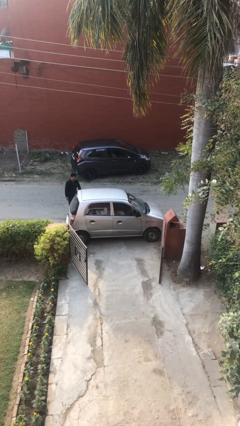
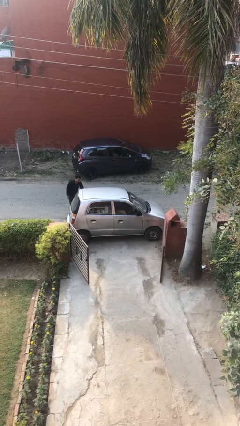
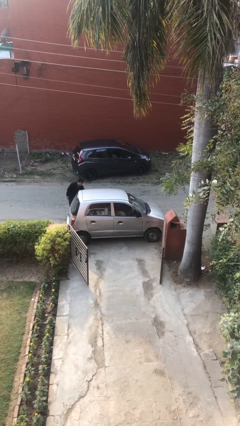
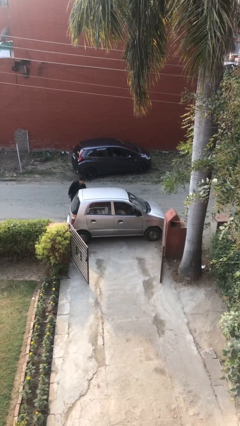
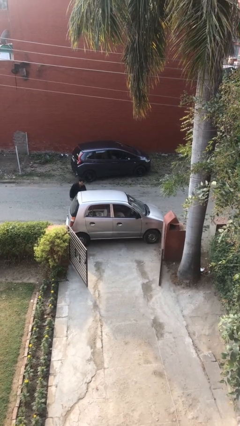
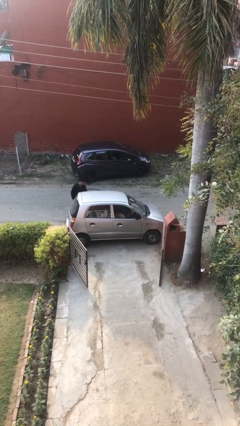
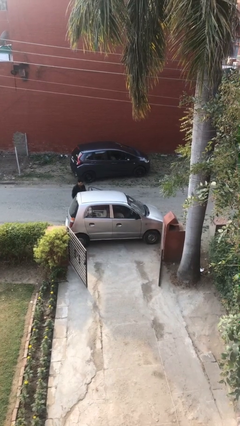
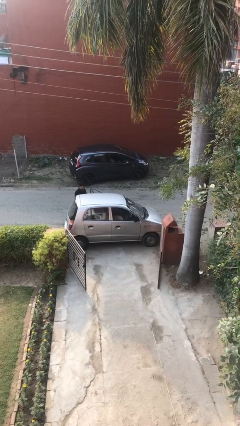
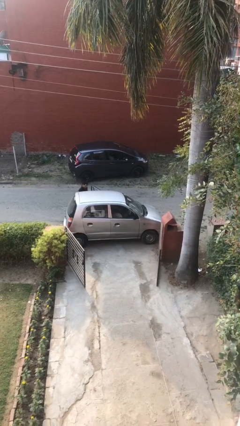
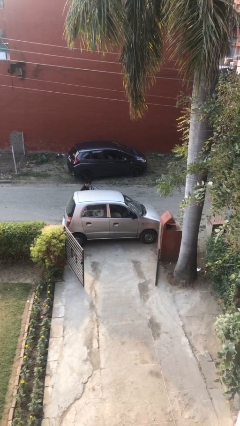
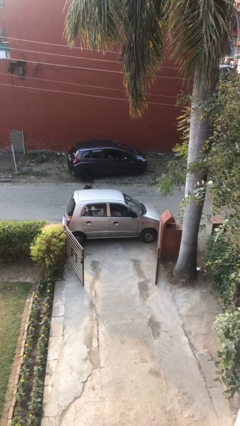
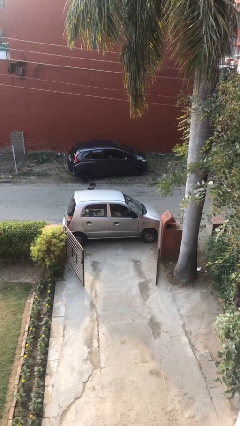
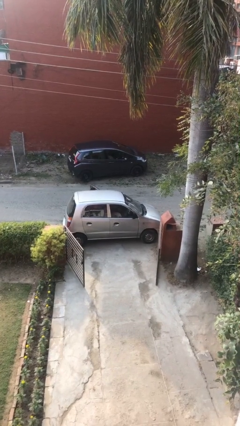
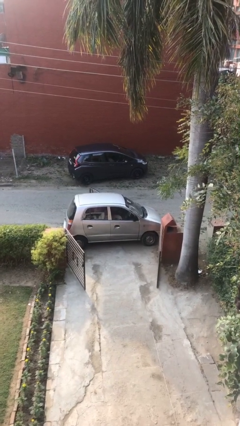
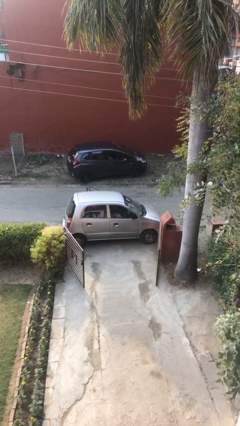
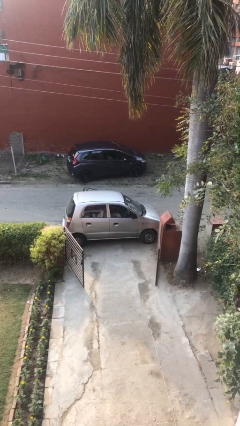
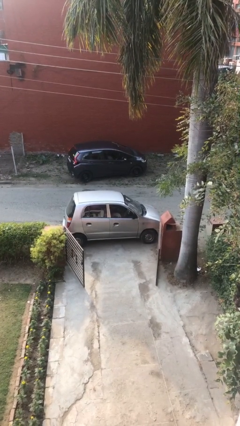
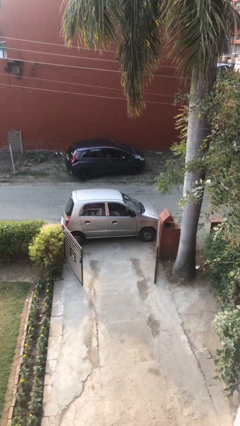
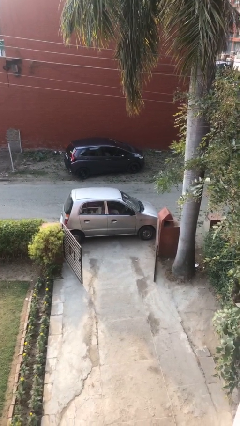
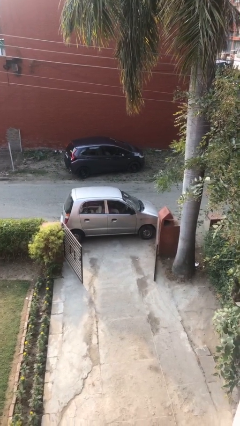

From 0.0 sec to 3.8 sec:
car picks up person

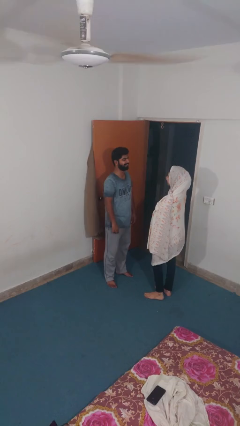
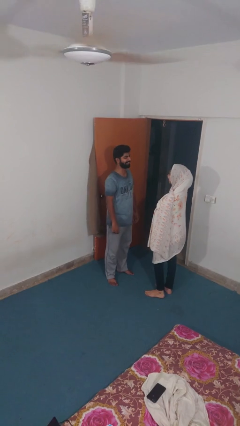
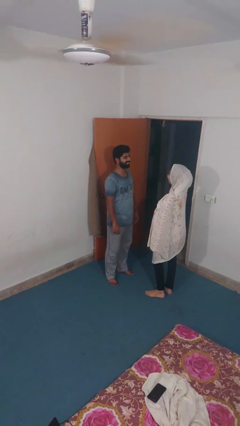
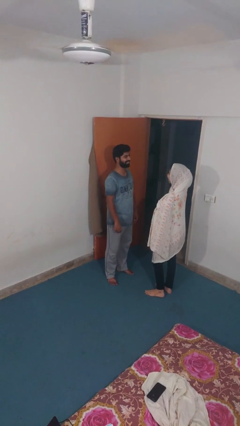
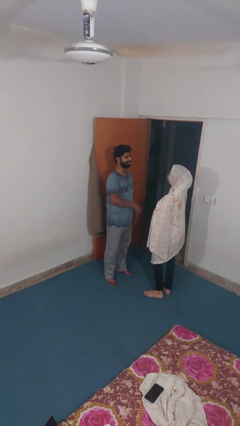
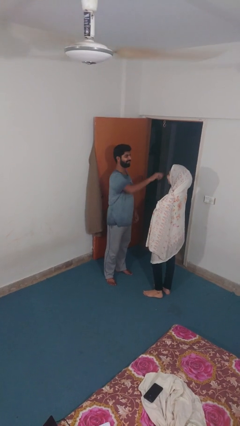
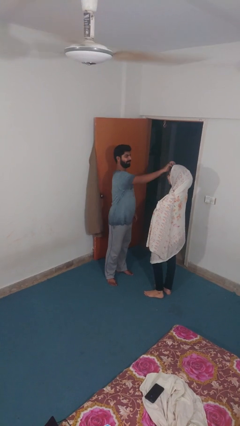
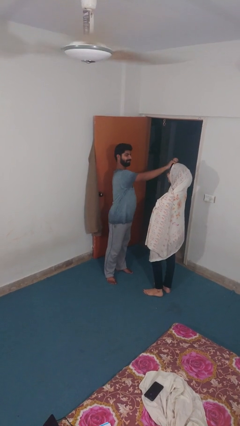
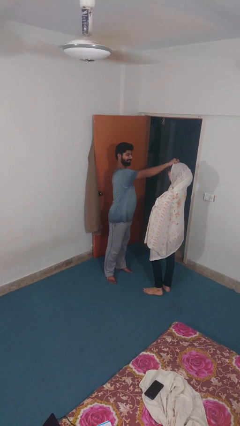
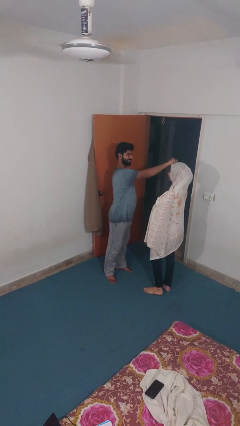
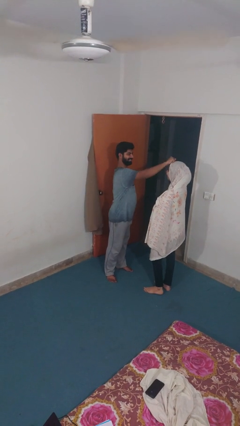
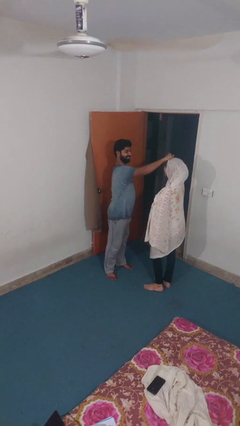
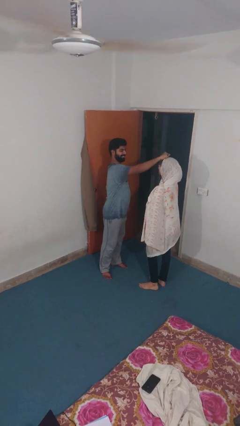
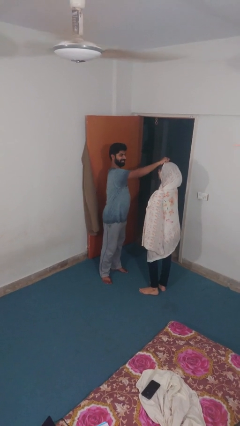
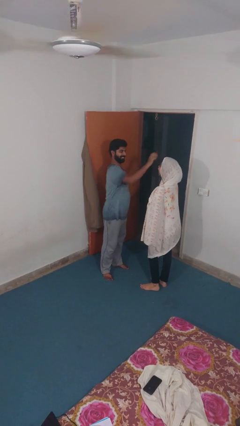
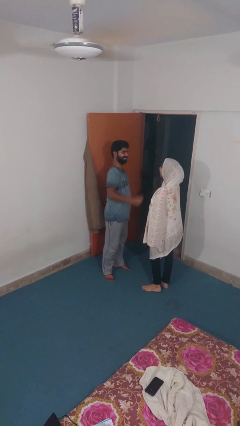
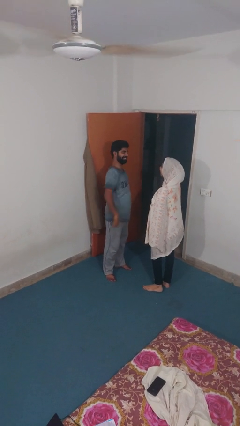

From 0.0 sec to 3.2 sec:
person grabs person by hair

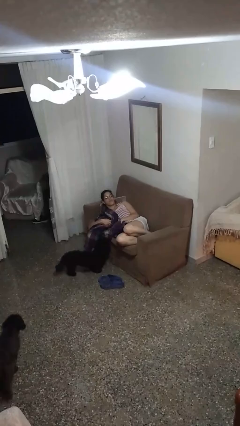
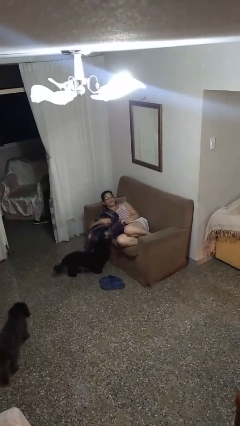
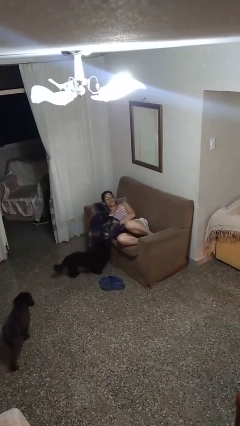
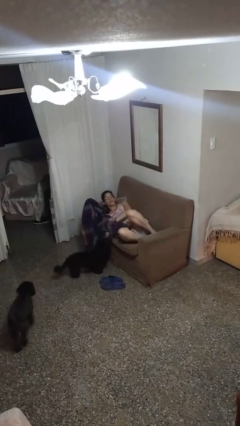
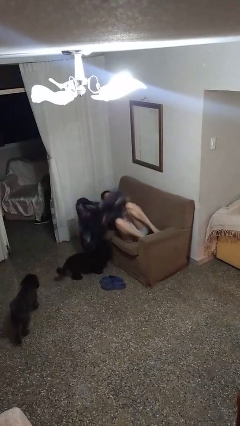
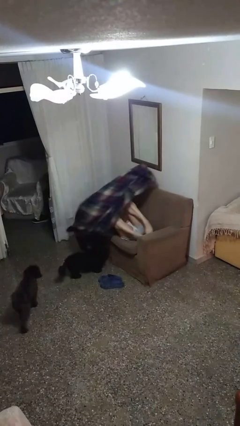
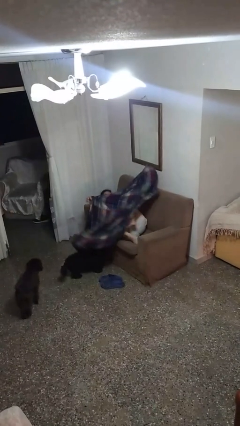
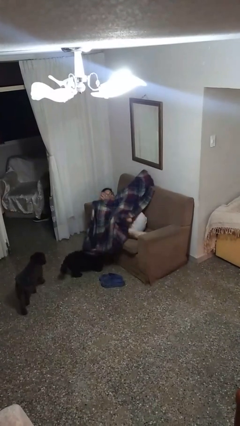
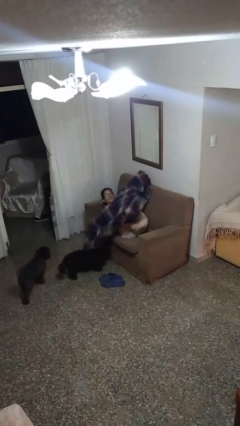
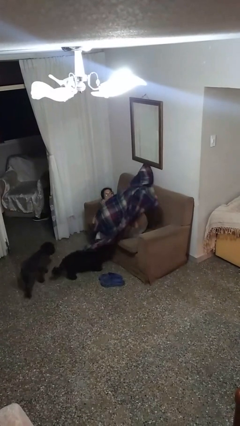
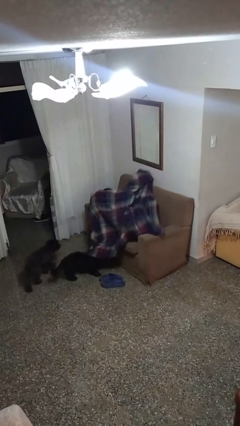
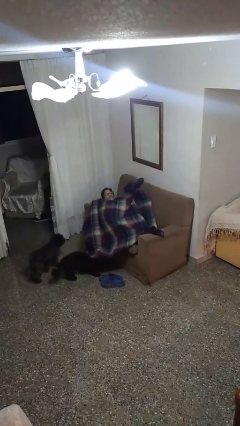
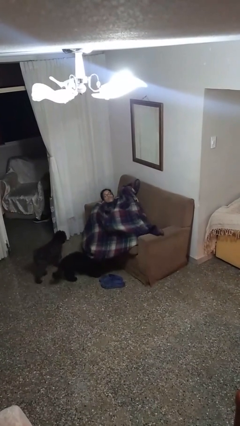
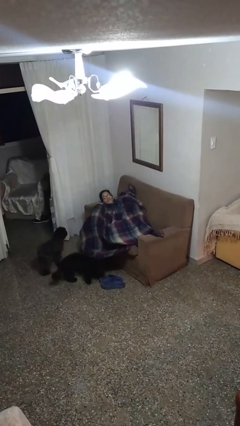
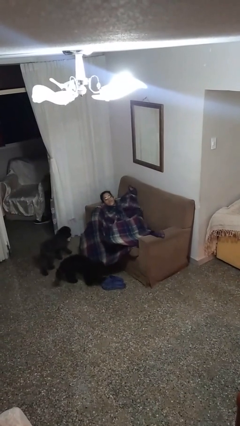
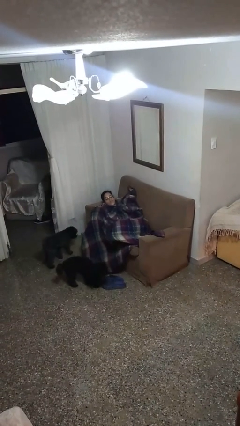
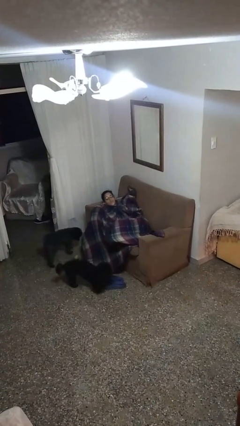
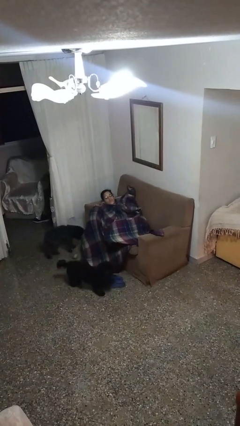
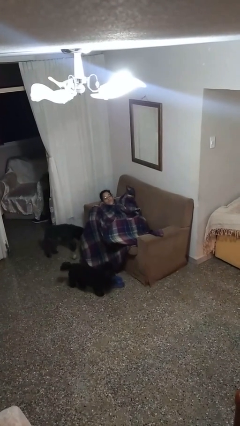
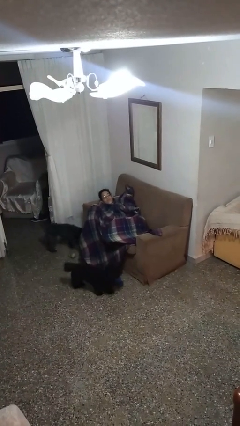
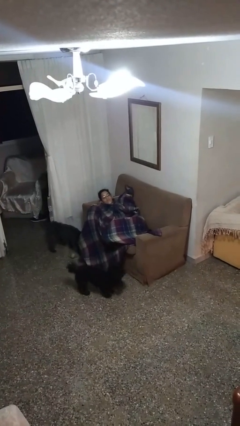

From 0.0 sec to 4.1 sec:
person covers with blanket

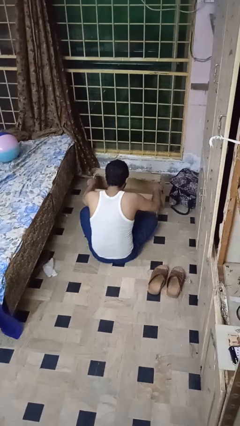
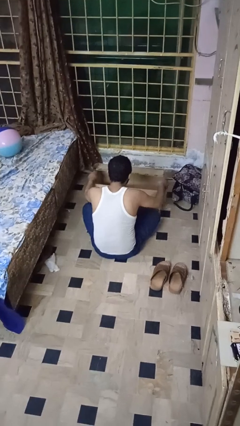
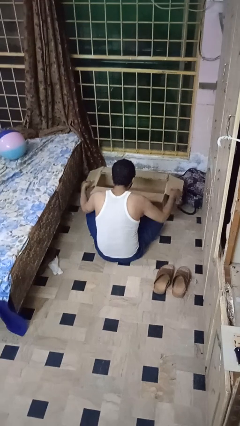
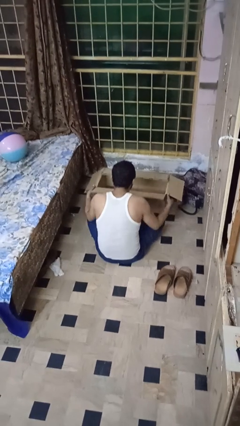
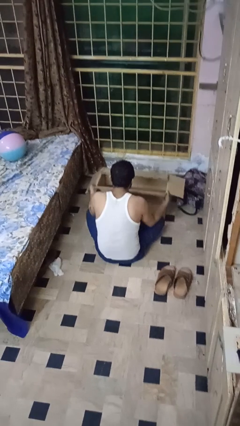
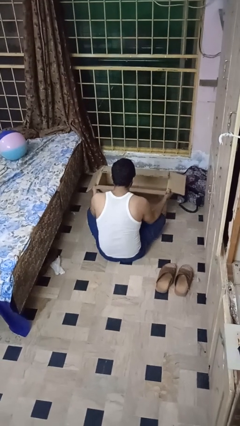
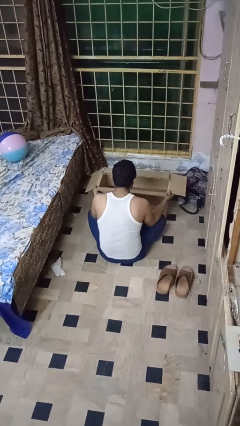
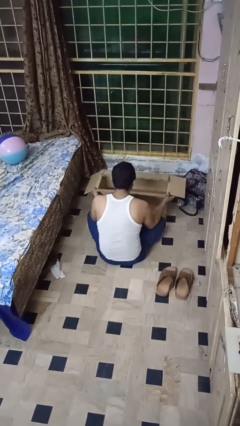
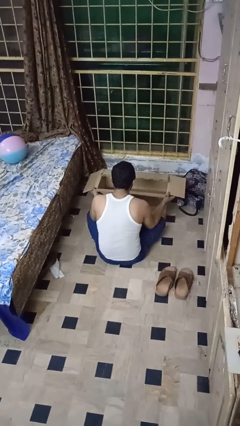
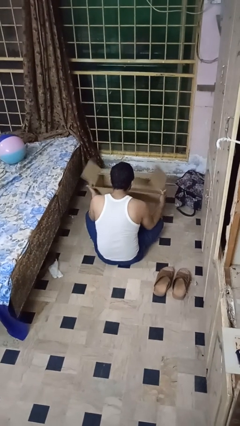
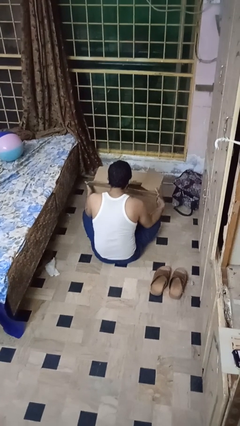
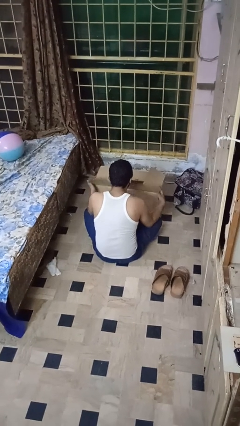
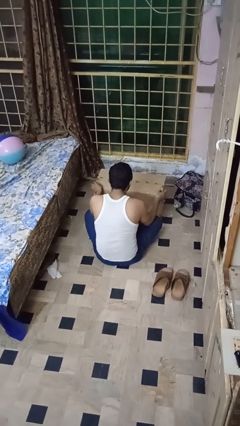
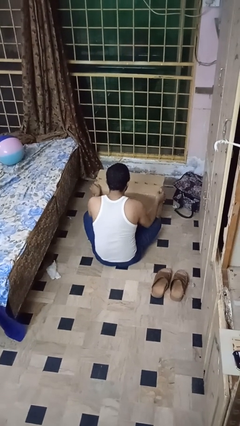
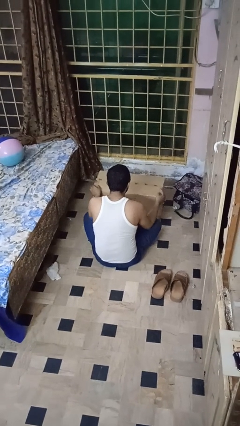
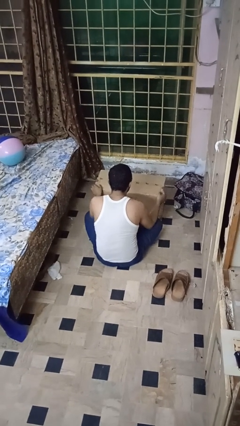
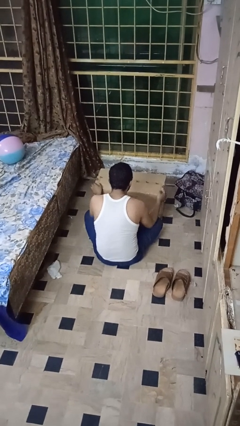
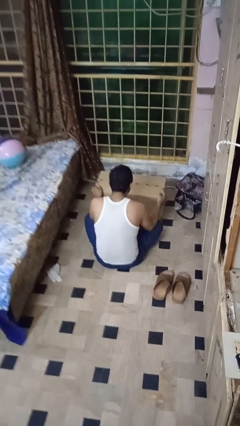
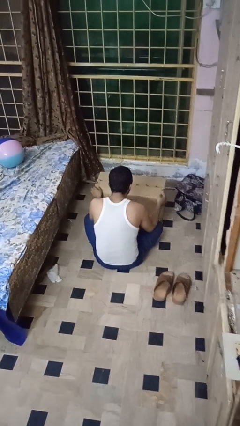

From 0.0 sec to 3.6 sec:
person closes box

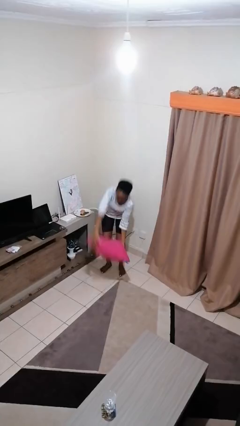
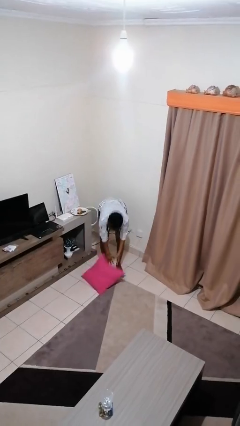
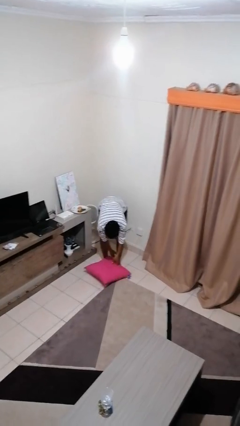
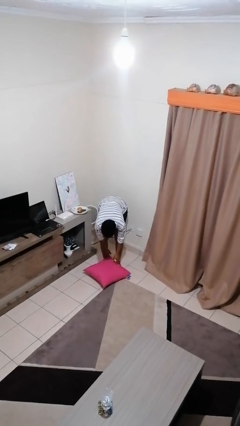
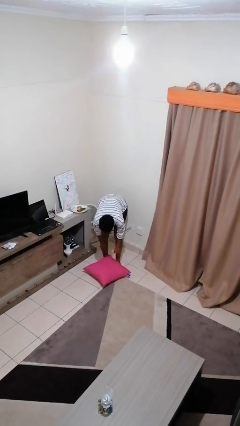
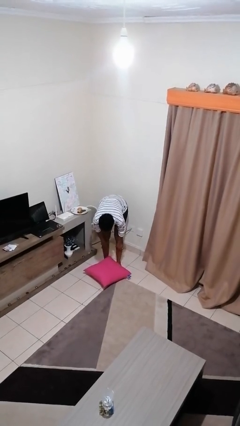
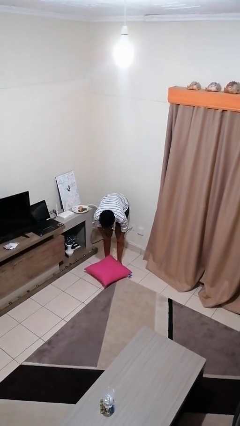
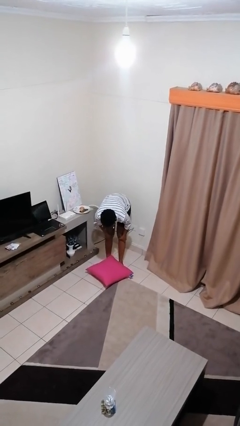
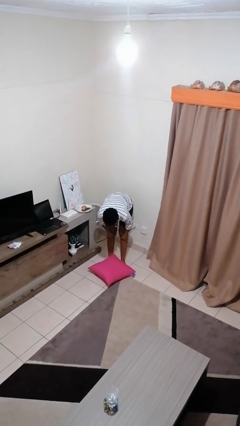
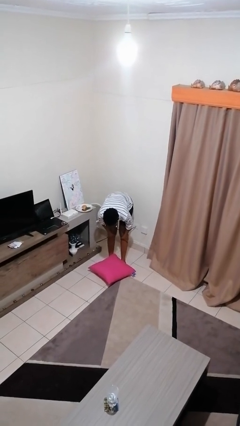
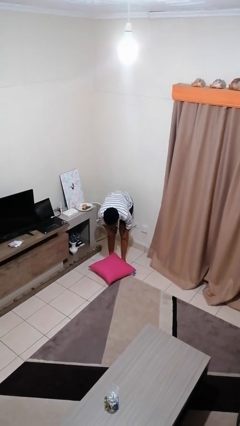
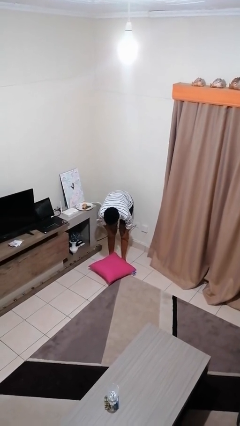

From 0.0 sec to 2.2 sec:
person catches dropped object

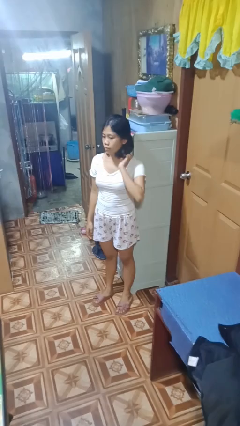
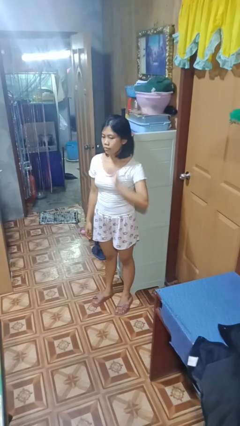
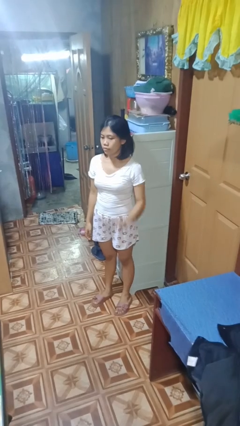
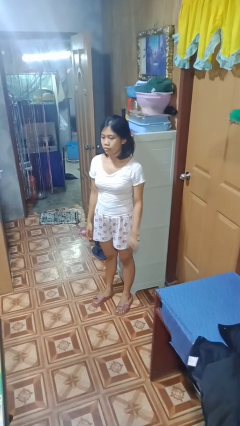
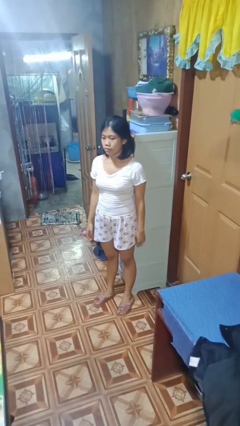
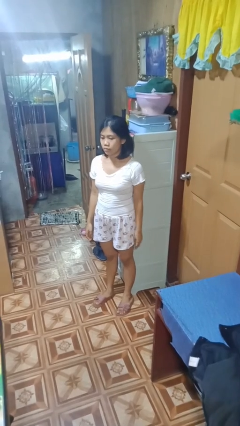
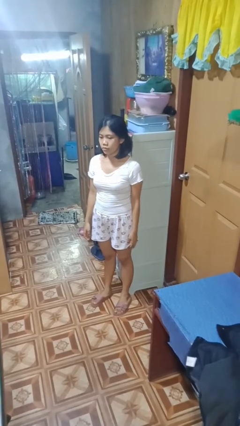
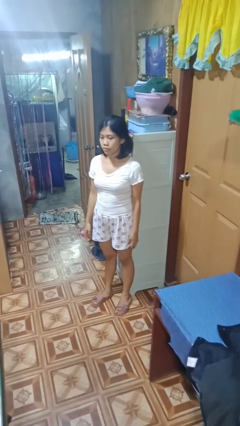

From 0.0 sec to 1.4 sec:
person strokes hair
